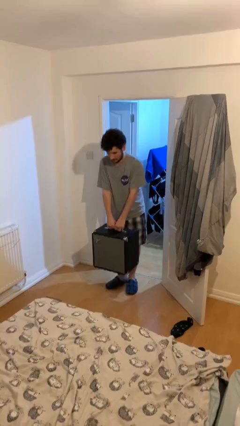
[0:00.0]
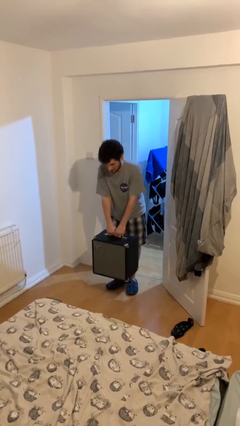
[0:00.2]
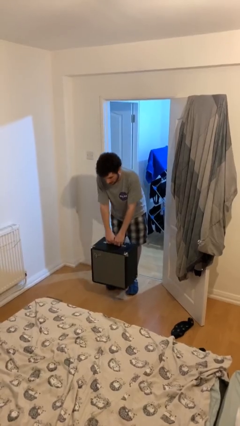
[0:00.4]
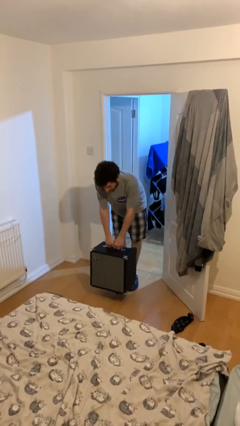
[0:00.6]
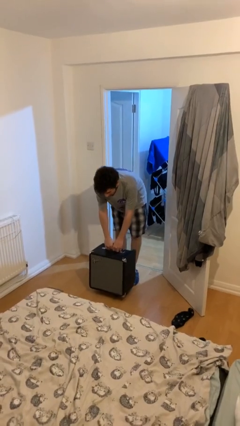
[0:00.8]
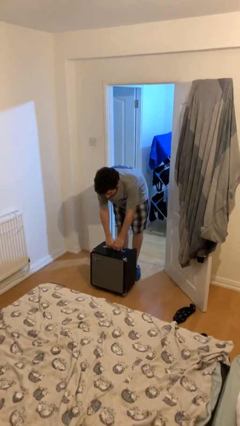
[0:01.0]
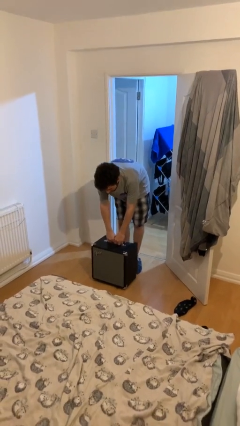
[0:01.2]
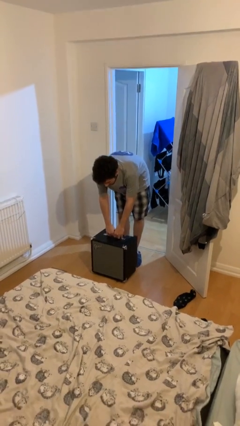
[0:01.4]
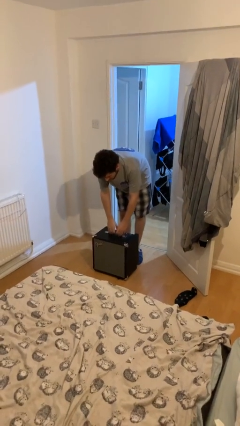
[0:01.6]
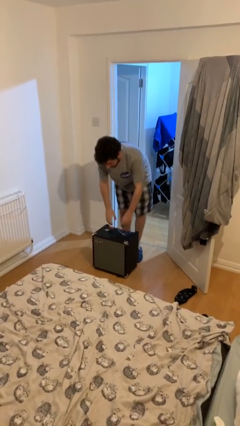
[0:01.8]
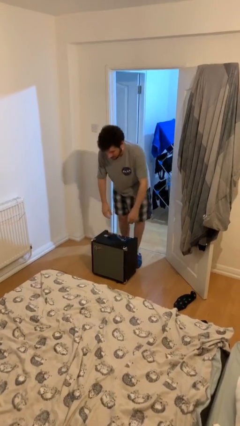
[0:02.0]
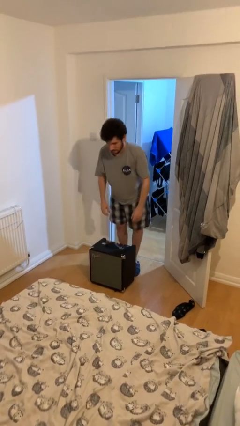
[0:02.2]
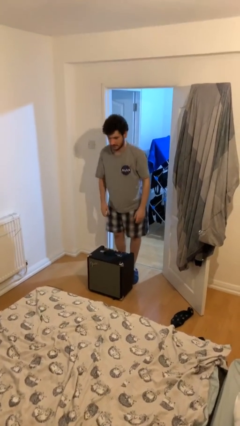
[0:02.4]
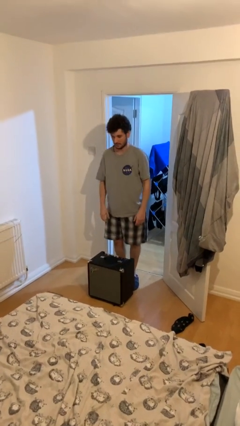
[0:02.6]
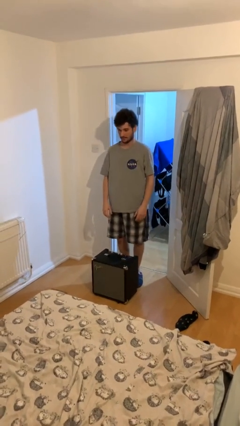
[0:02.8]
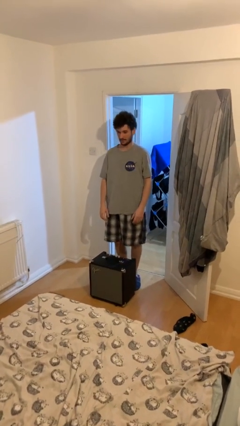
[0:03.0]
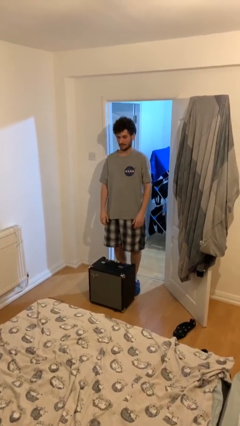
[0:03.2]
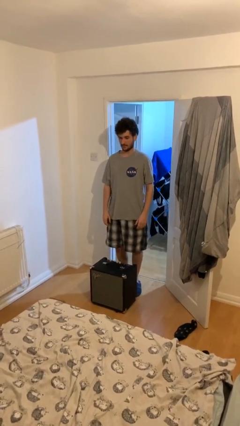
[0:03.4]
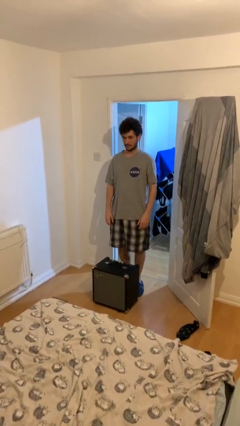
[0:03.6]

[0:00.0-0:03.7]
person puts down object on floor

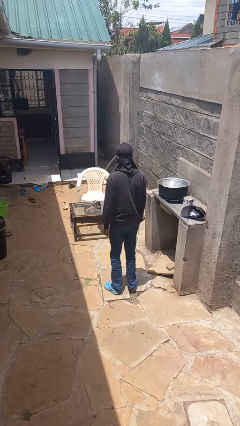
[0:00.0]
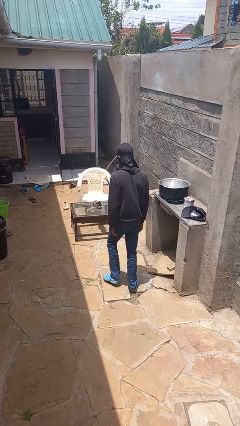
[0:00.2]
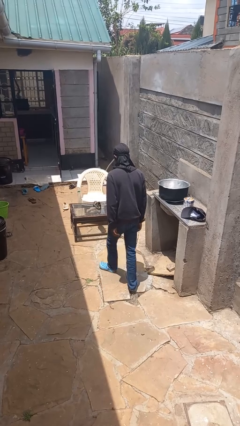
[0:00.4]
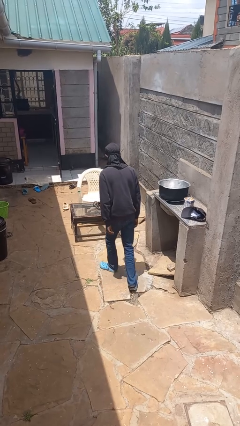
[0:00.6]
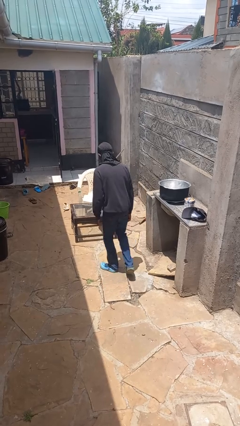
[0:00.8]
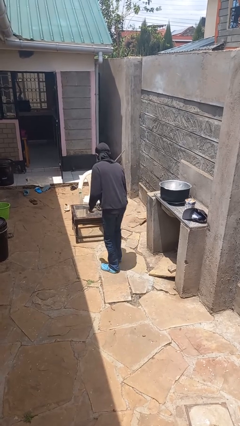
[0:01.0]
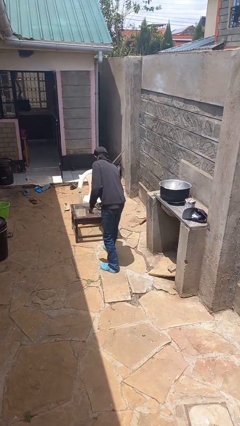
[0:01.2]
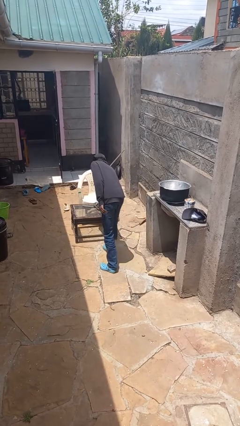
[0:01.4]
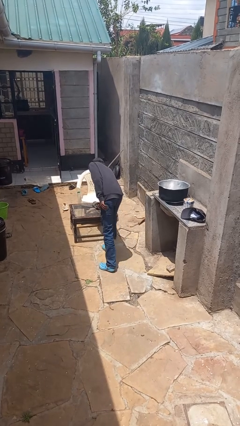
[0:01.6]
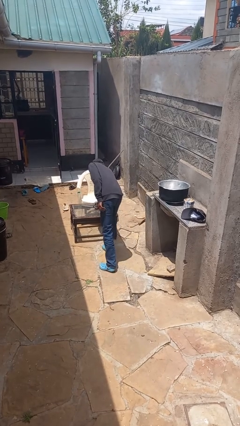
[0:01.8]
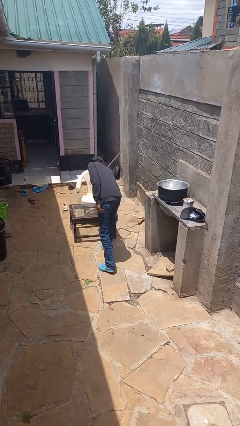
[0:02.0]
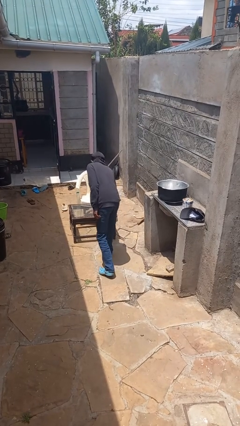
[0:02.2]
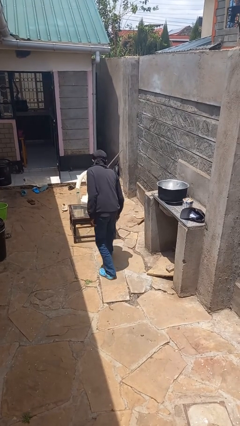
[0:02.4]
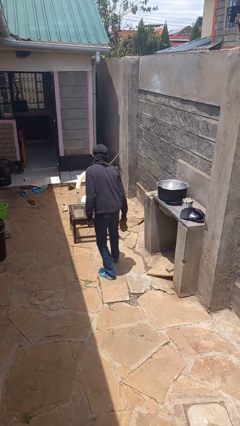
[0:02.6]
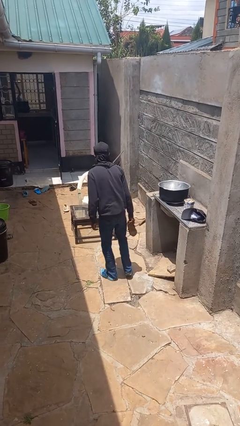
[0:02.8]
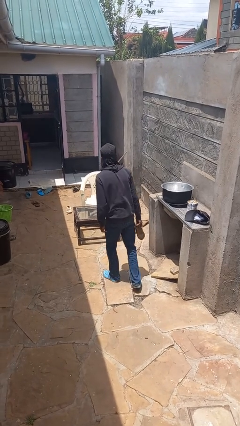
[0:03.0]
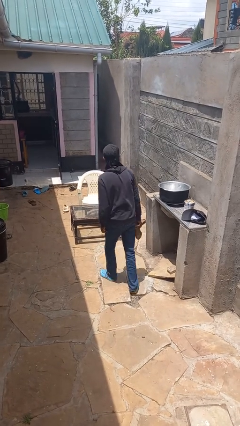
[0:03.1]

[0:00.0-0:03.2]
person picks up object from table

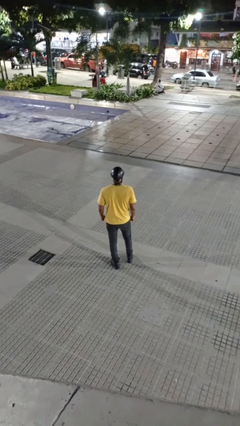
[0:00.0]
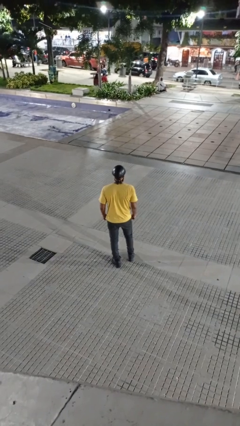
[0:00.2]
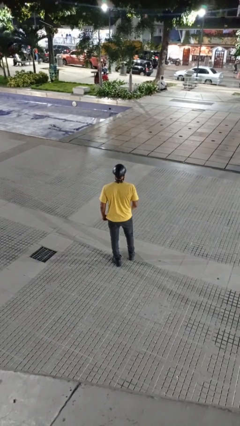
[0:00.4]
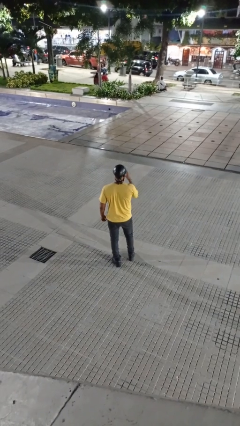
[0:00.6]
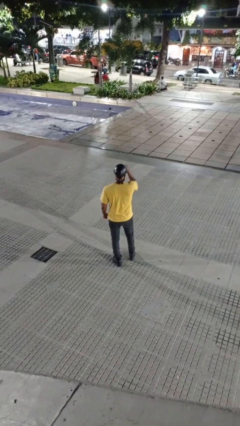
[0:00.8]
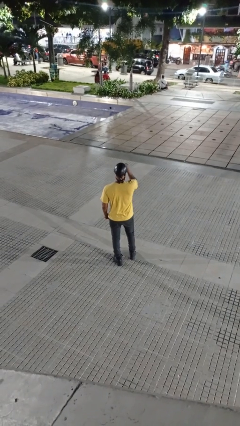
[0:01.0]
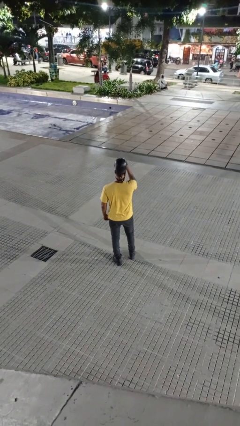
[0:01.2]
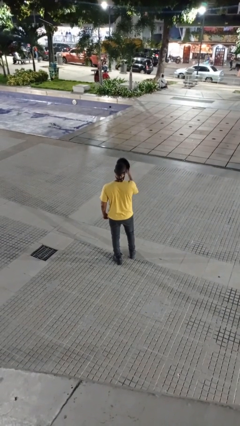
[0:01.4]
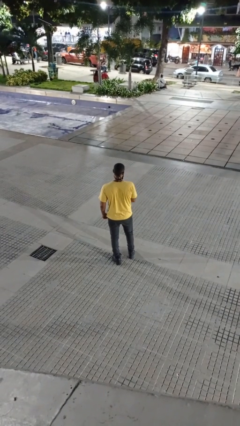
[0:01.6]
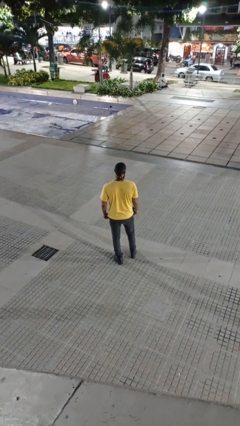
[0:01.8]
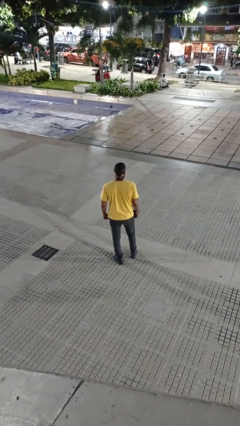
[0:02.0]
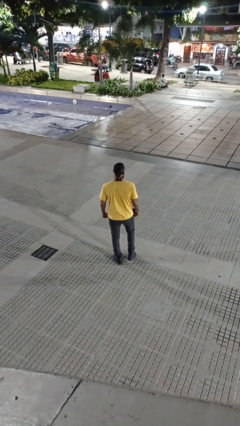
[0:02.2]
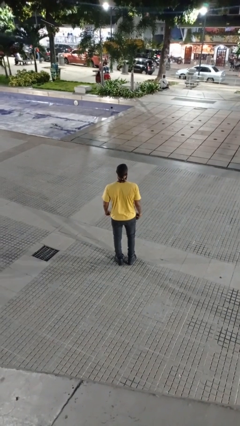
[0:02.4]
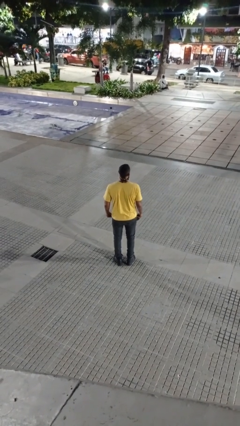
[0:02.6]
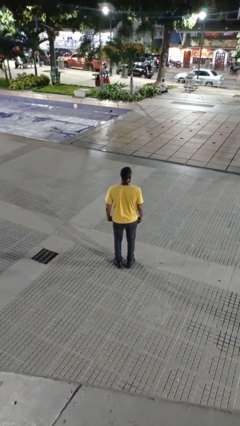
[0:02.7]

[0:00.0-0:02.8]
person takes off hat

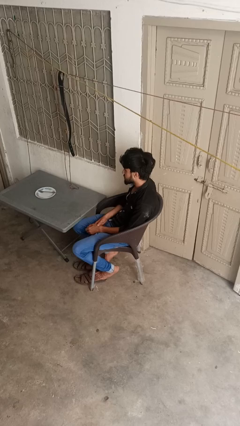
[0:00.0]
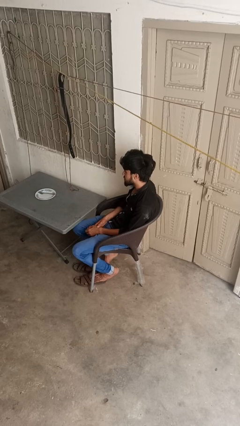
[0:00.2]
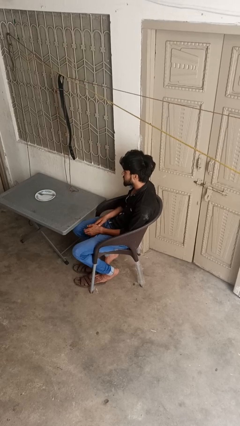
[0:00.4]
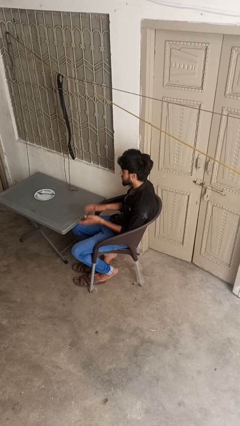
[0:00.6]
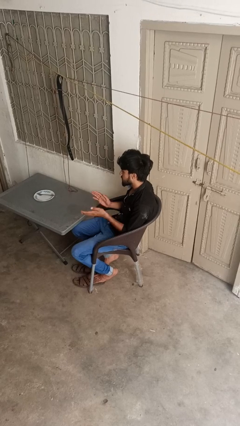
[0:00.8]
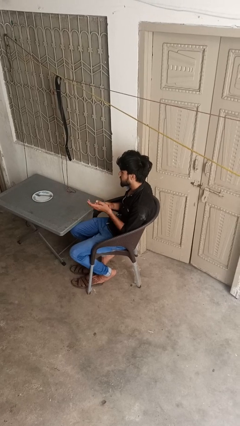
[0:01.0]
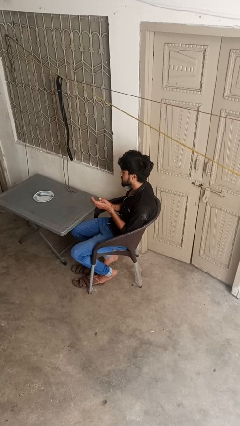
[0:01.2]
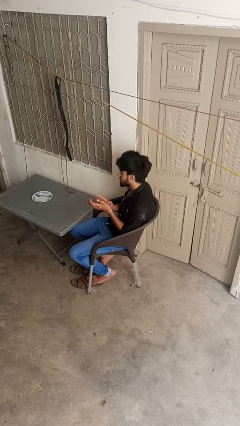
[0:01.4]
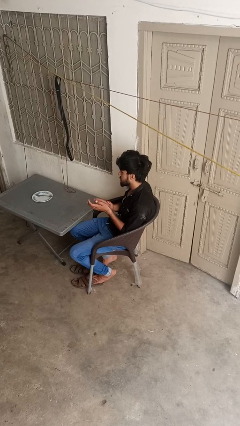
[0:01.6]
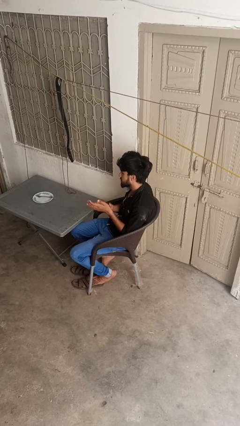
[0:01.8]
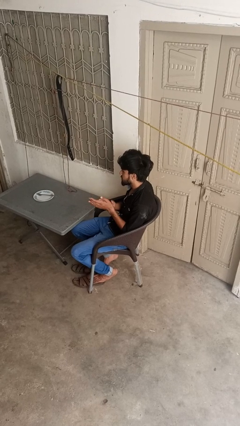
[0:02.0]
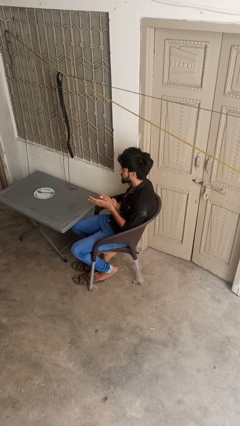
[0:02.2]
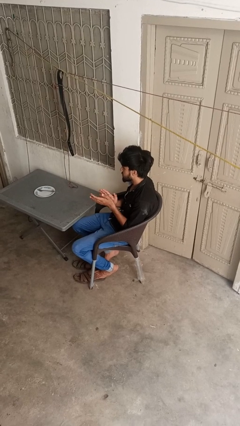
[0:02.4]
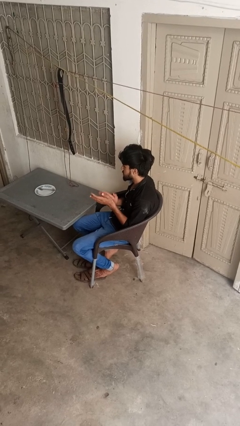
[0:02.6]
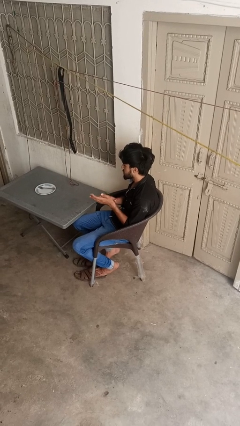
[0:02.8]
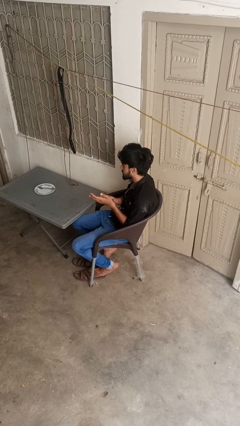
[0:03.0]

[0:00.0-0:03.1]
person claps hands

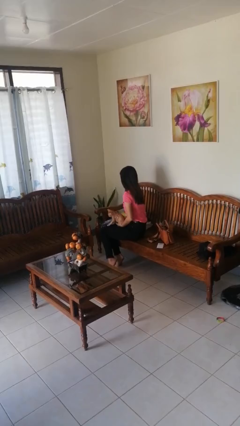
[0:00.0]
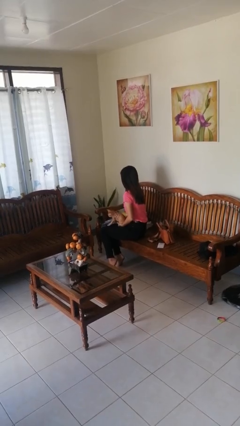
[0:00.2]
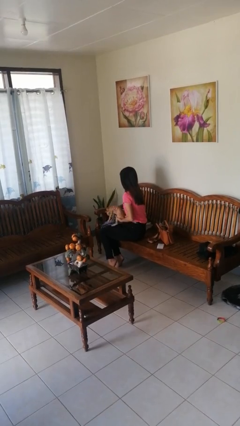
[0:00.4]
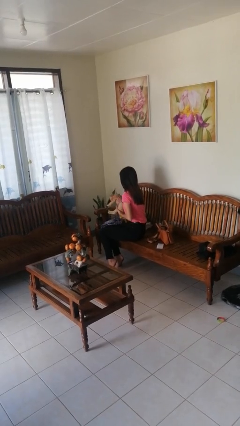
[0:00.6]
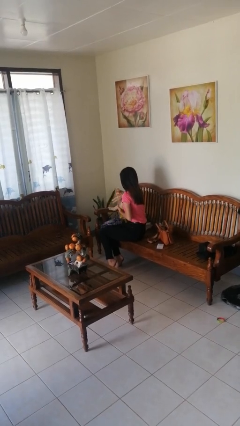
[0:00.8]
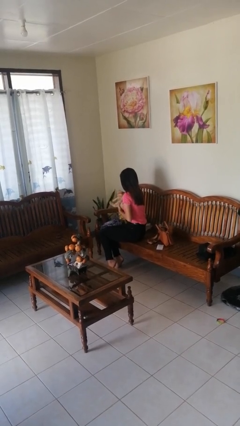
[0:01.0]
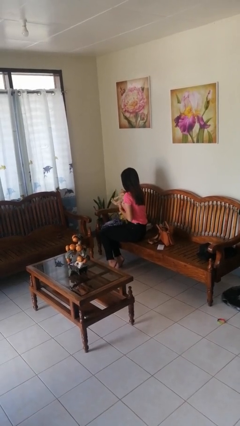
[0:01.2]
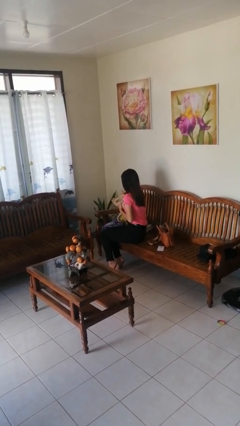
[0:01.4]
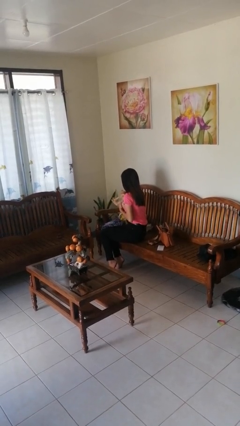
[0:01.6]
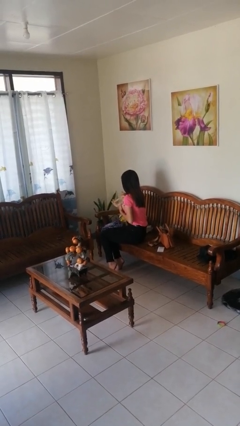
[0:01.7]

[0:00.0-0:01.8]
person hugs cat

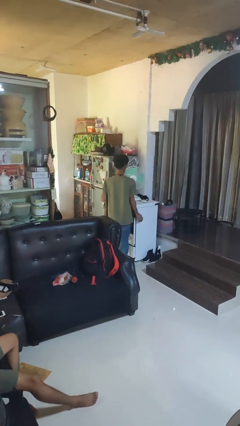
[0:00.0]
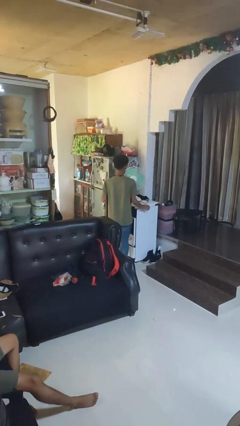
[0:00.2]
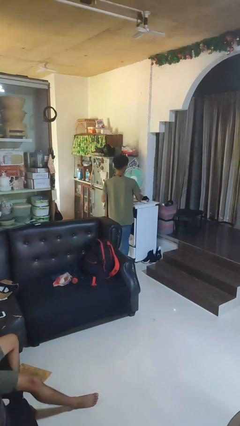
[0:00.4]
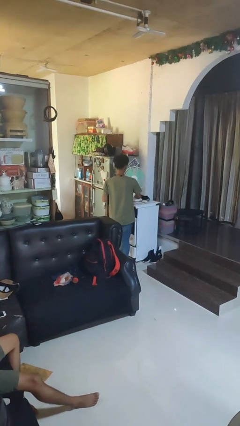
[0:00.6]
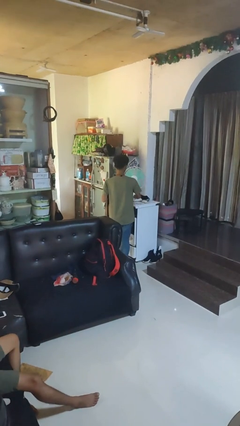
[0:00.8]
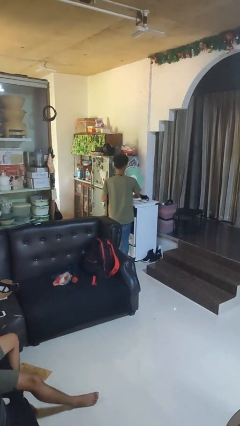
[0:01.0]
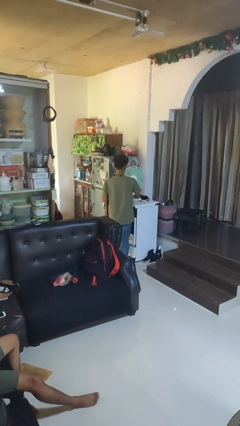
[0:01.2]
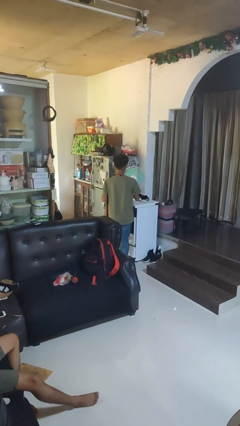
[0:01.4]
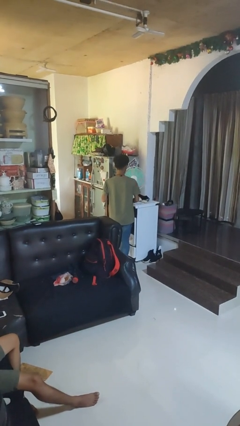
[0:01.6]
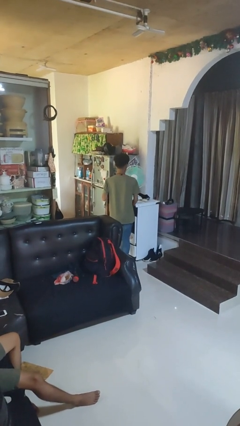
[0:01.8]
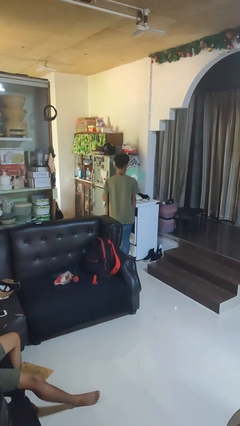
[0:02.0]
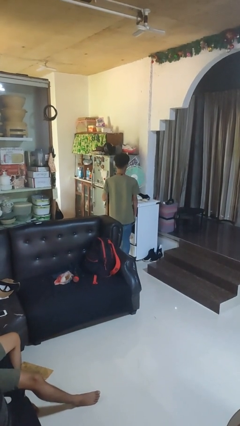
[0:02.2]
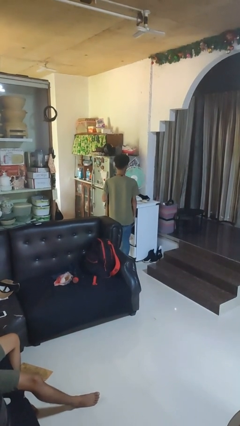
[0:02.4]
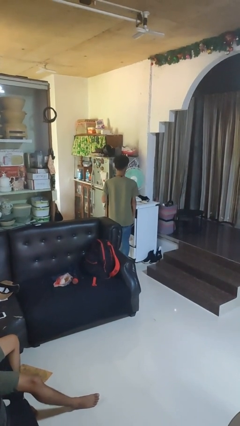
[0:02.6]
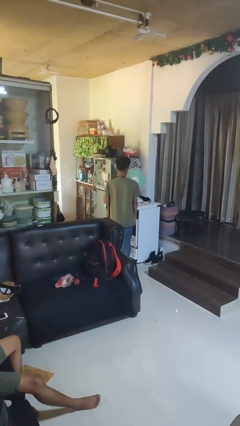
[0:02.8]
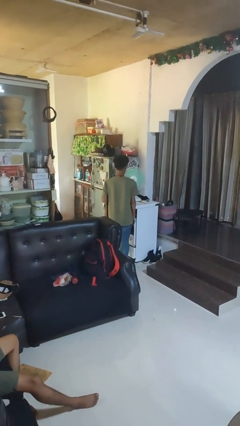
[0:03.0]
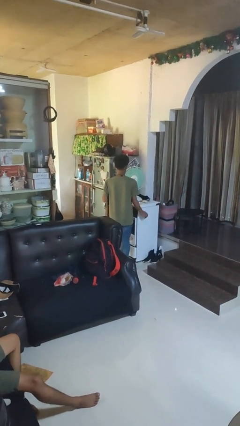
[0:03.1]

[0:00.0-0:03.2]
person turns on fan

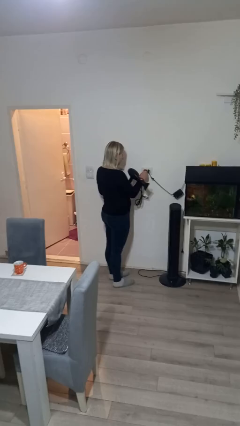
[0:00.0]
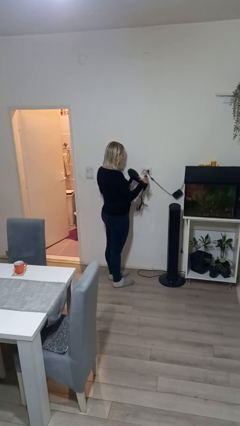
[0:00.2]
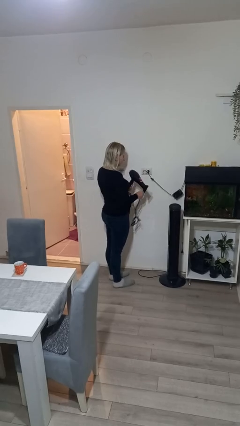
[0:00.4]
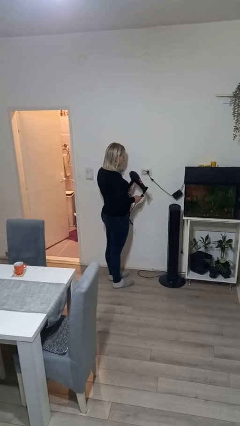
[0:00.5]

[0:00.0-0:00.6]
person unplugs from electrical socket
